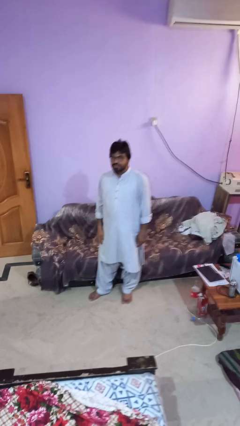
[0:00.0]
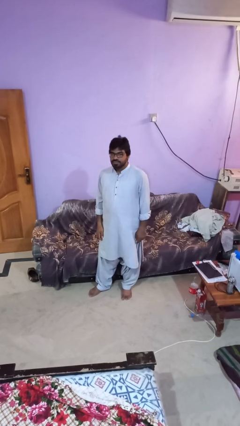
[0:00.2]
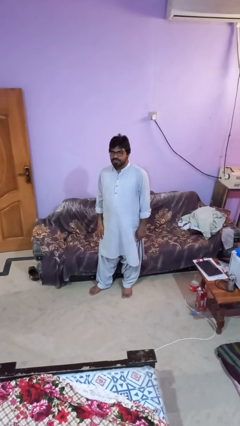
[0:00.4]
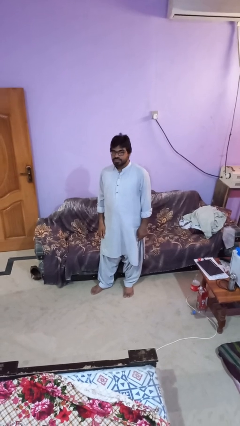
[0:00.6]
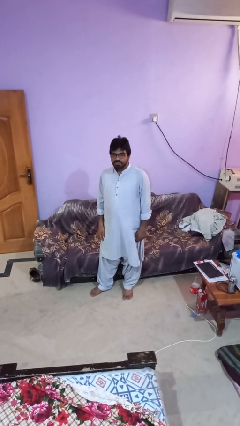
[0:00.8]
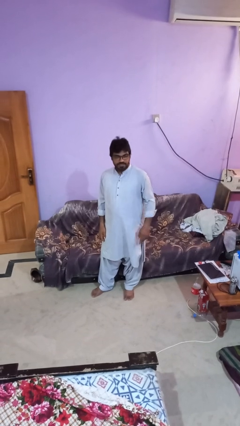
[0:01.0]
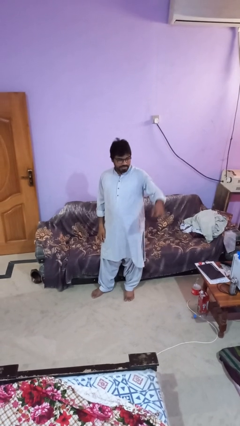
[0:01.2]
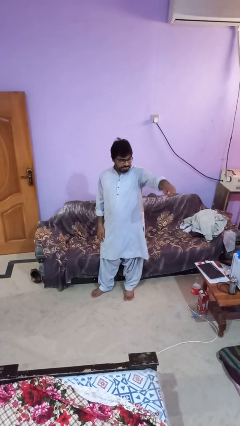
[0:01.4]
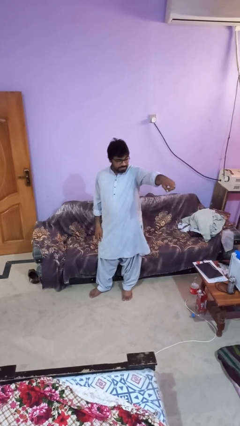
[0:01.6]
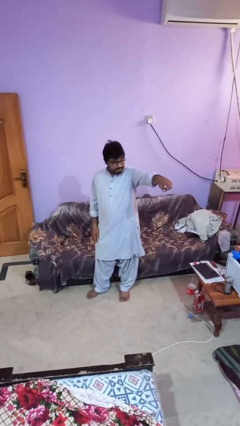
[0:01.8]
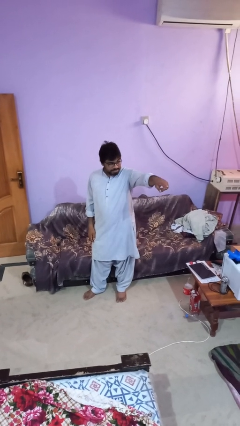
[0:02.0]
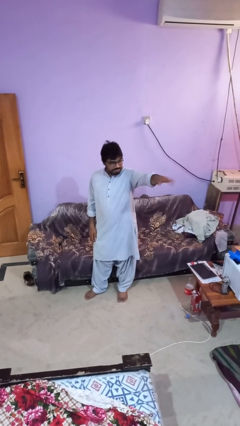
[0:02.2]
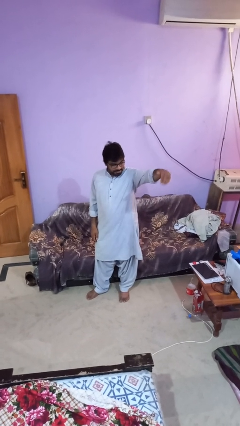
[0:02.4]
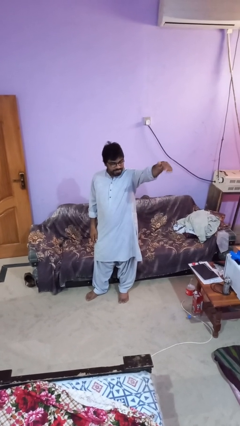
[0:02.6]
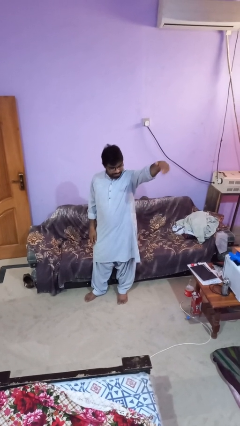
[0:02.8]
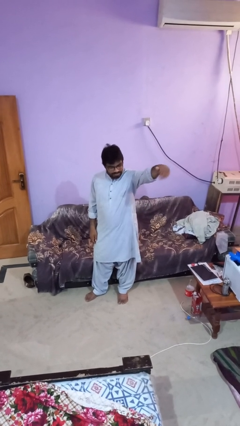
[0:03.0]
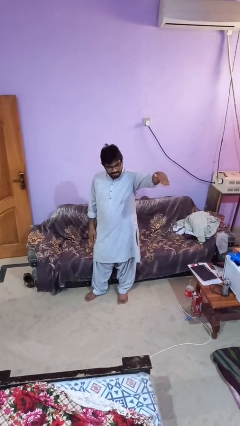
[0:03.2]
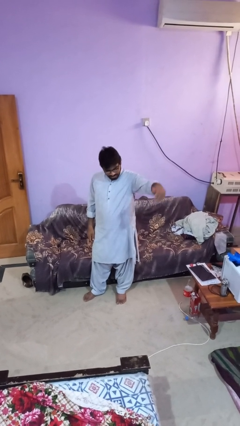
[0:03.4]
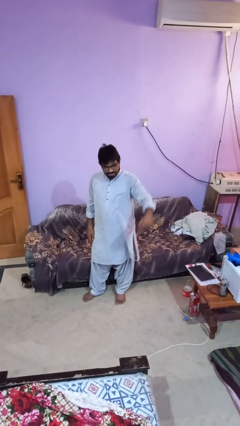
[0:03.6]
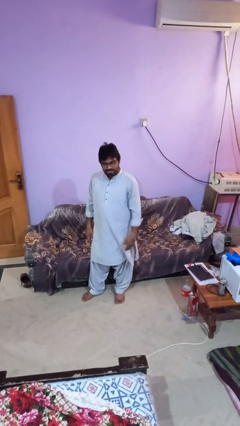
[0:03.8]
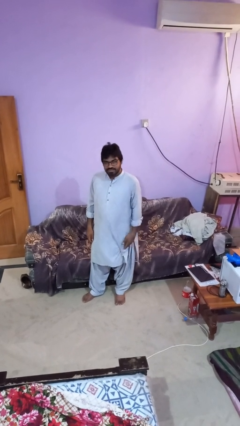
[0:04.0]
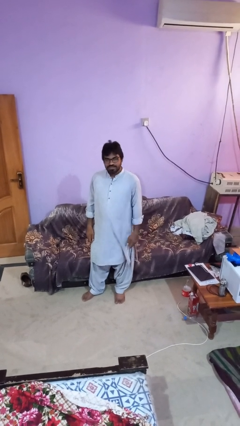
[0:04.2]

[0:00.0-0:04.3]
person gestures come here

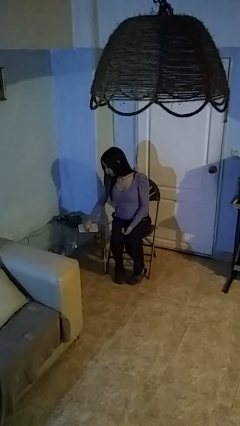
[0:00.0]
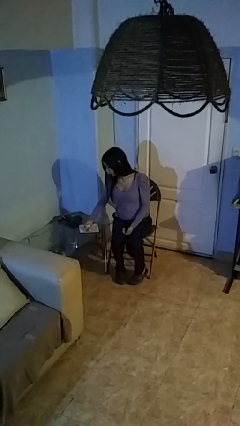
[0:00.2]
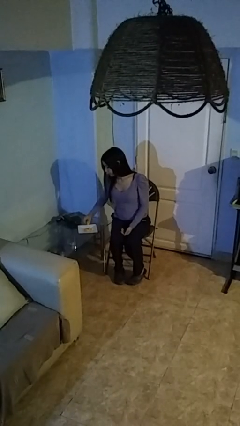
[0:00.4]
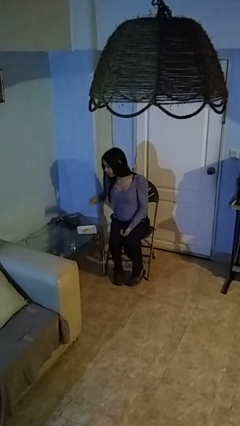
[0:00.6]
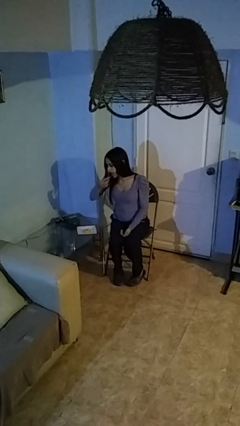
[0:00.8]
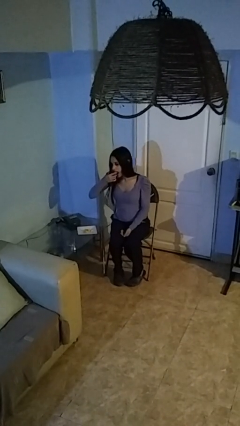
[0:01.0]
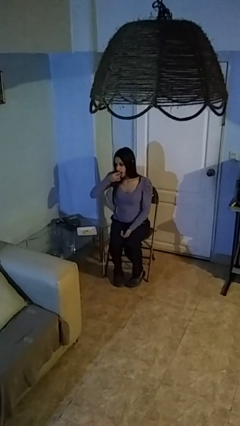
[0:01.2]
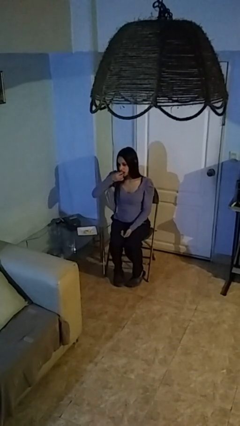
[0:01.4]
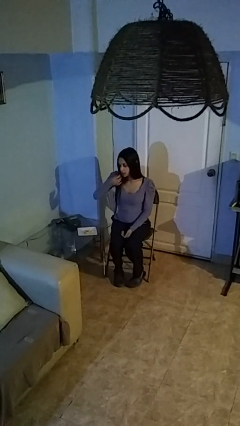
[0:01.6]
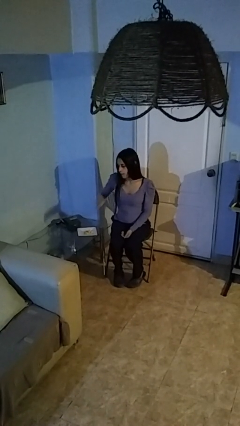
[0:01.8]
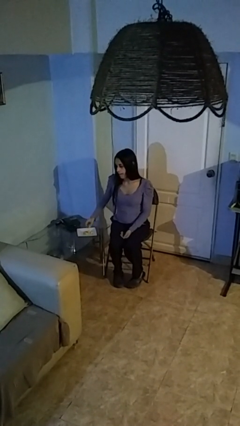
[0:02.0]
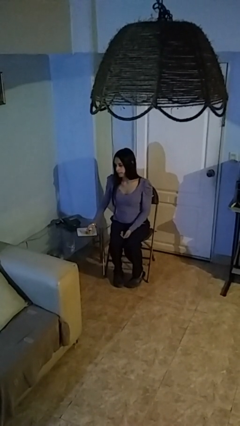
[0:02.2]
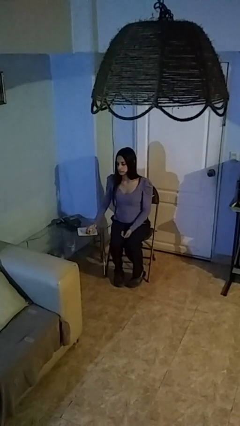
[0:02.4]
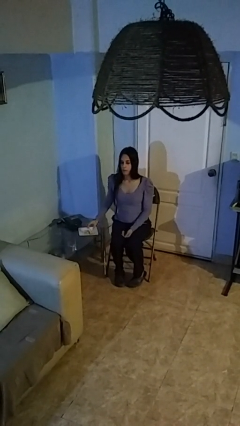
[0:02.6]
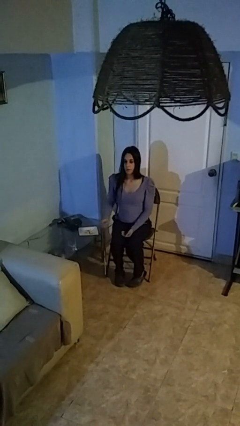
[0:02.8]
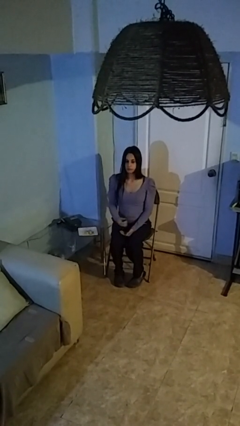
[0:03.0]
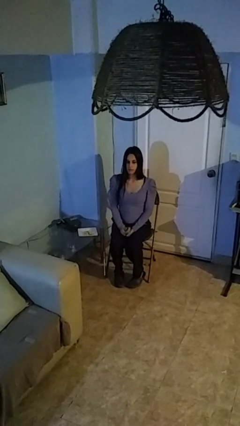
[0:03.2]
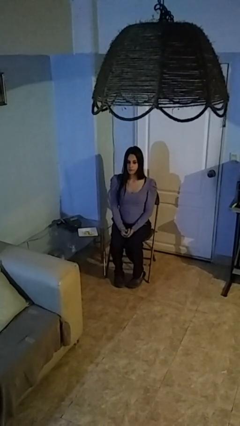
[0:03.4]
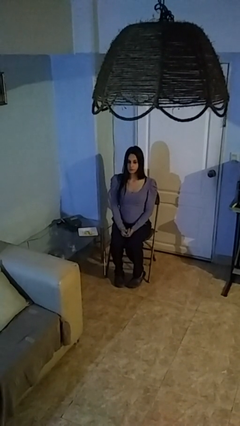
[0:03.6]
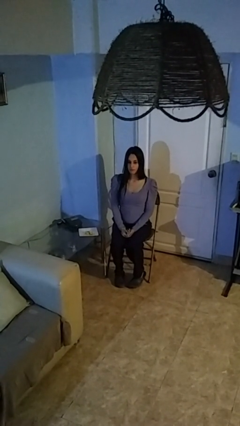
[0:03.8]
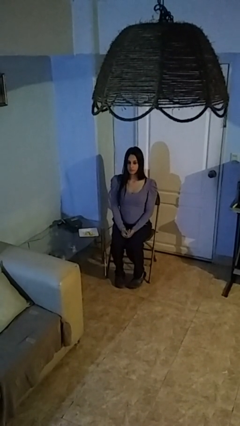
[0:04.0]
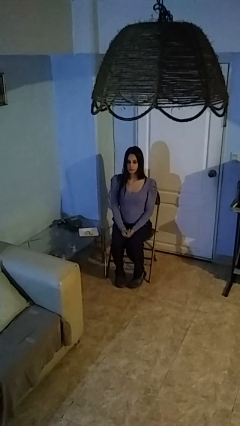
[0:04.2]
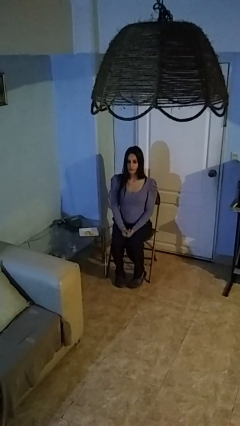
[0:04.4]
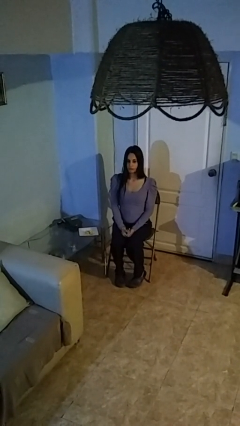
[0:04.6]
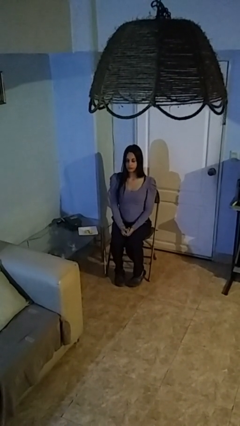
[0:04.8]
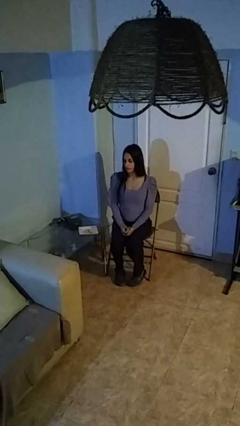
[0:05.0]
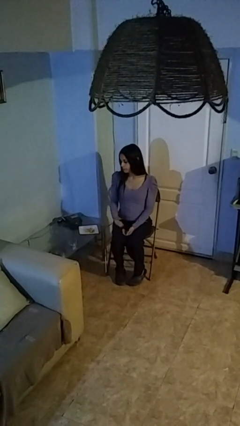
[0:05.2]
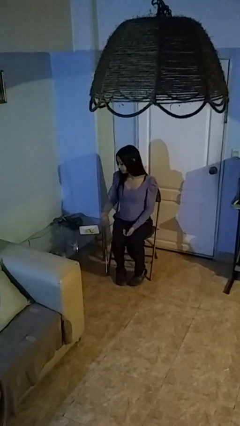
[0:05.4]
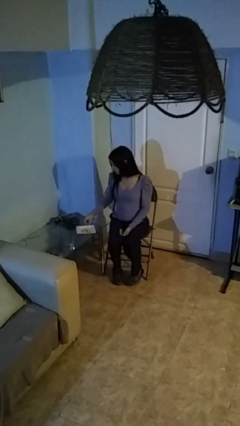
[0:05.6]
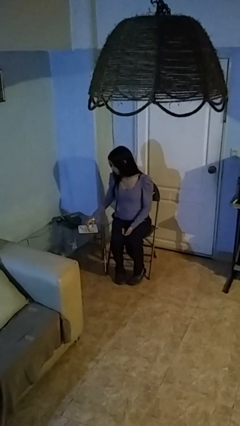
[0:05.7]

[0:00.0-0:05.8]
person eats with hands

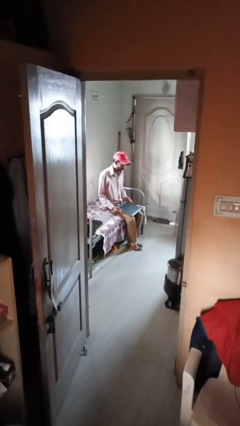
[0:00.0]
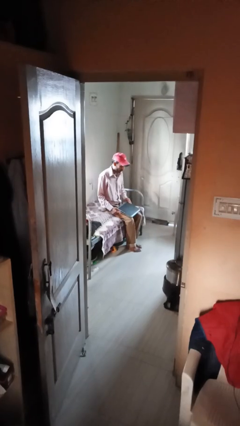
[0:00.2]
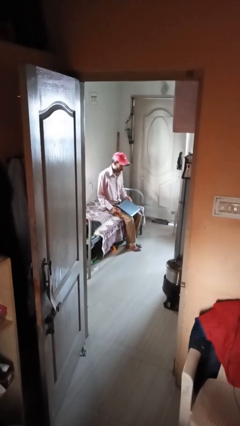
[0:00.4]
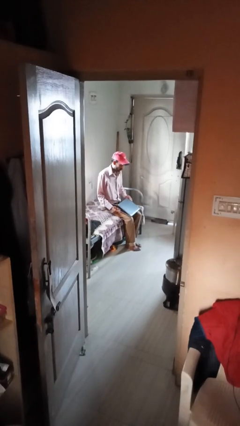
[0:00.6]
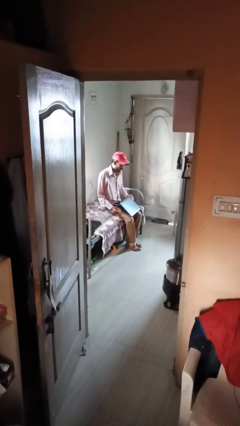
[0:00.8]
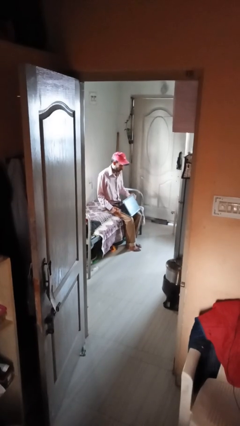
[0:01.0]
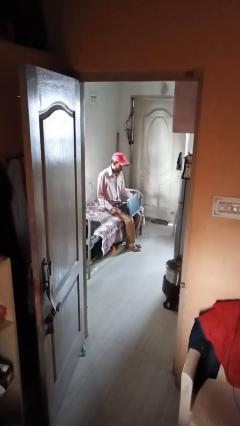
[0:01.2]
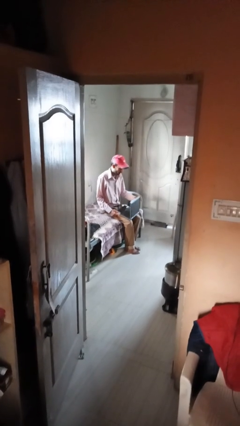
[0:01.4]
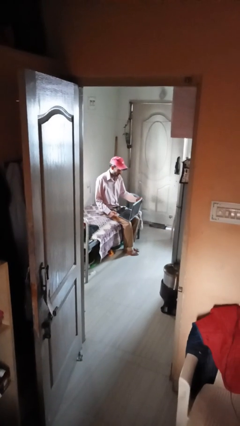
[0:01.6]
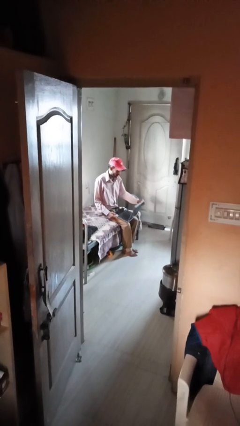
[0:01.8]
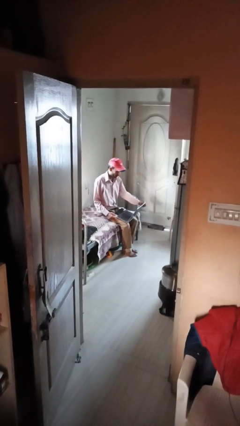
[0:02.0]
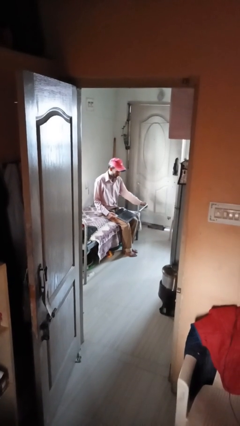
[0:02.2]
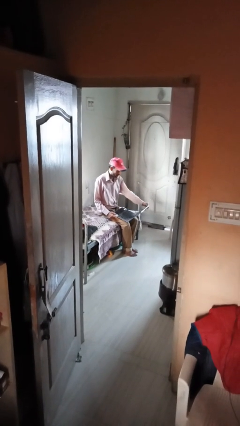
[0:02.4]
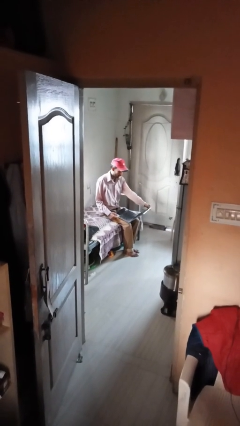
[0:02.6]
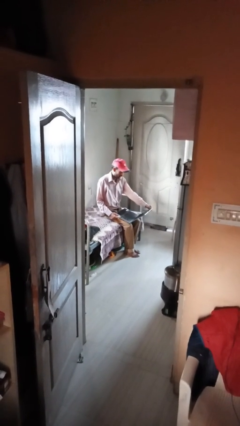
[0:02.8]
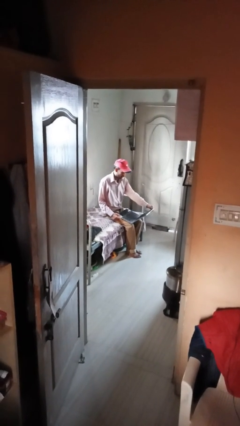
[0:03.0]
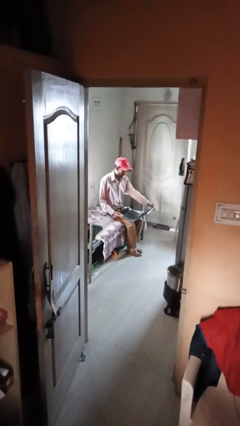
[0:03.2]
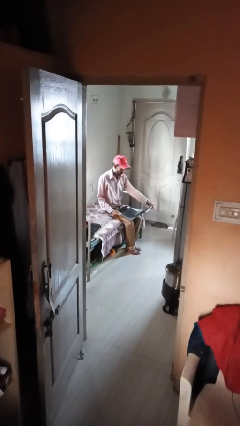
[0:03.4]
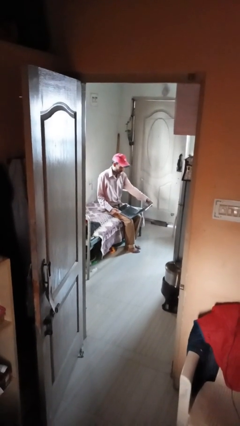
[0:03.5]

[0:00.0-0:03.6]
person opens laptop

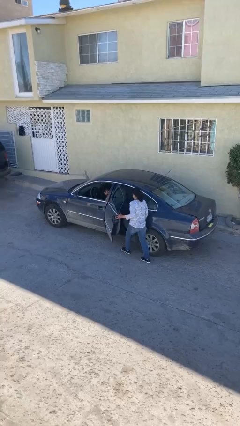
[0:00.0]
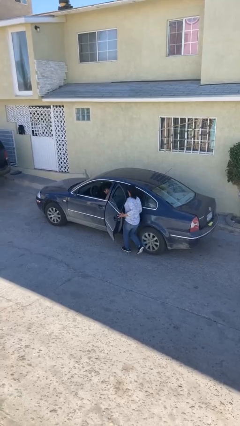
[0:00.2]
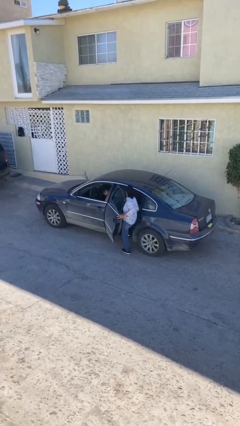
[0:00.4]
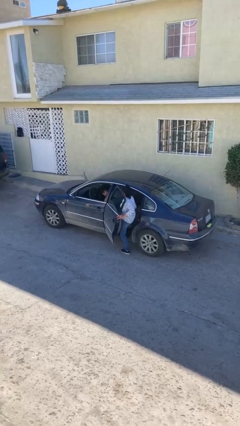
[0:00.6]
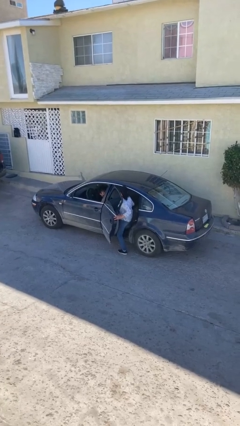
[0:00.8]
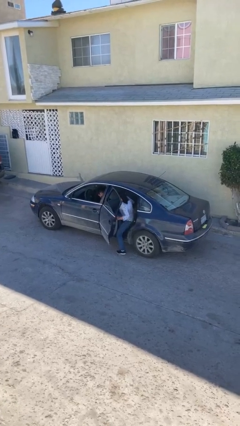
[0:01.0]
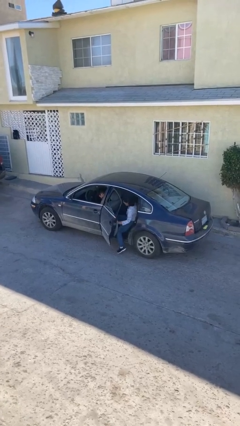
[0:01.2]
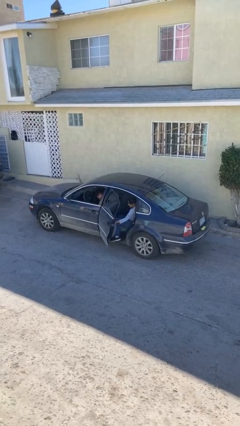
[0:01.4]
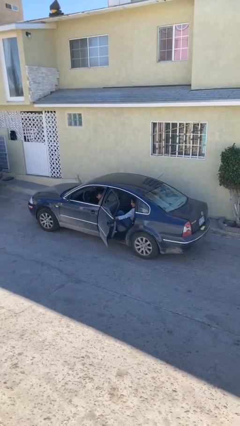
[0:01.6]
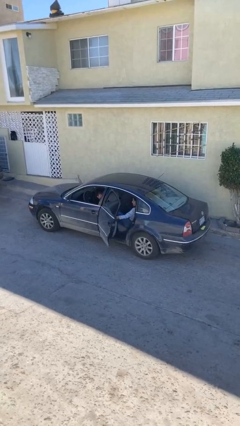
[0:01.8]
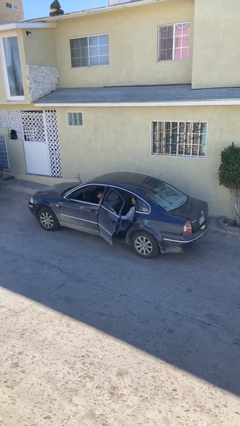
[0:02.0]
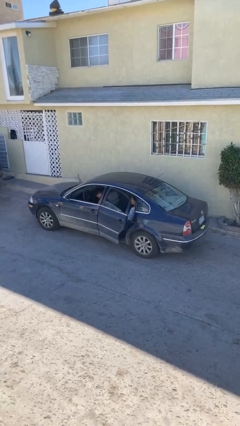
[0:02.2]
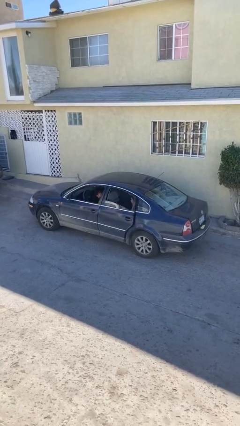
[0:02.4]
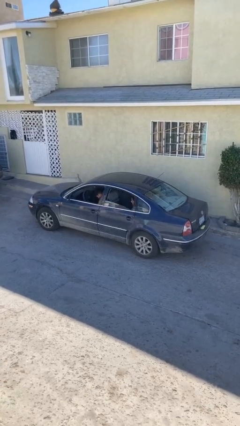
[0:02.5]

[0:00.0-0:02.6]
car picks up person

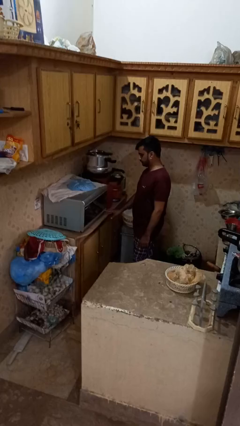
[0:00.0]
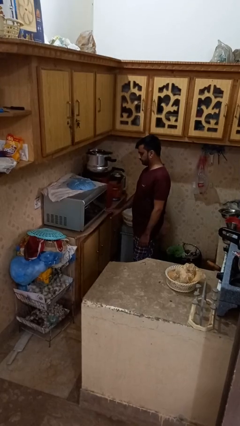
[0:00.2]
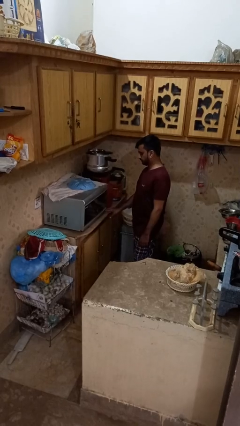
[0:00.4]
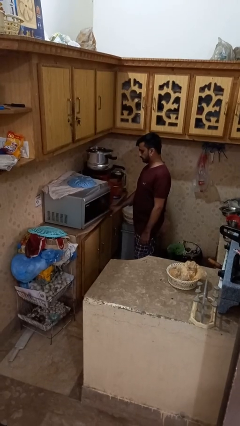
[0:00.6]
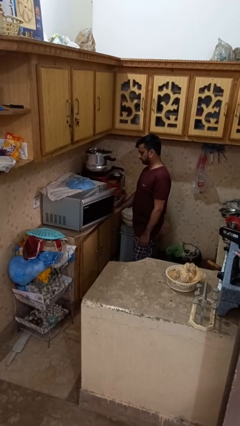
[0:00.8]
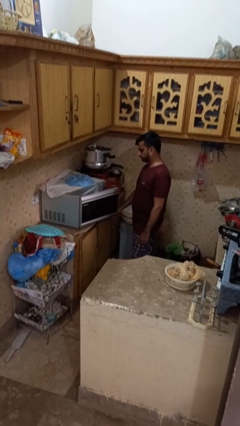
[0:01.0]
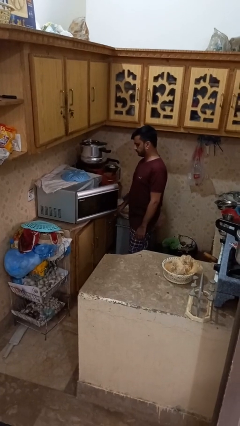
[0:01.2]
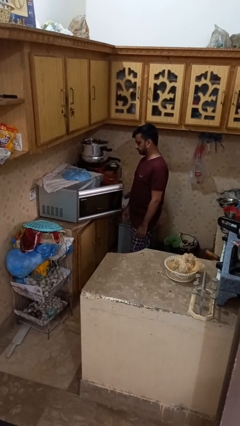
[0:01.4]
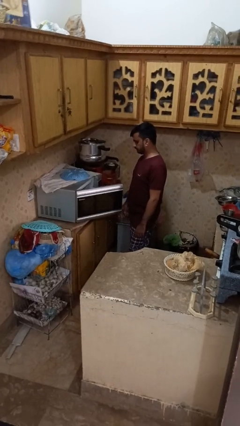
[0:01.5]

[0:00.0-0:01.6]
person opens microwave
